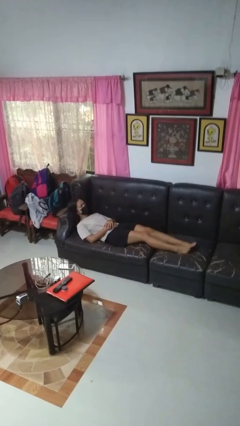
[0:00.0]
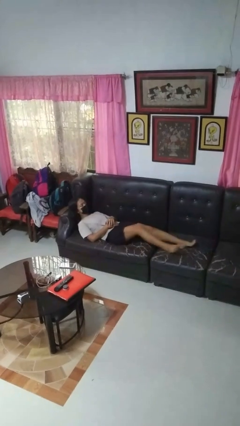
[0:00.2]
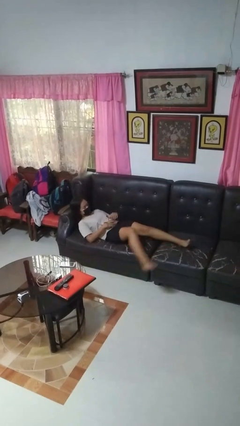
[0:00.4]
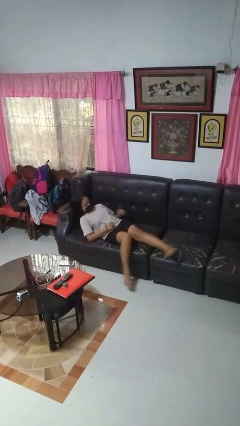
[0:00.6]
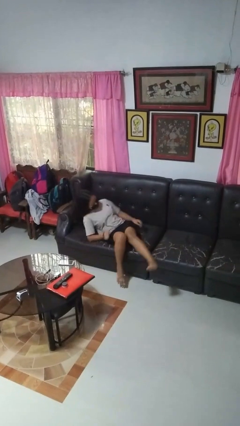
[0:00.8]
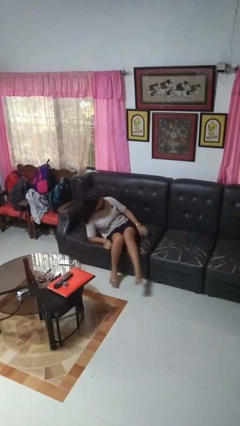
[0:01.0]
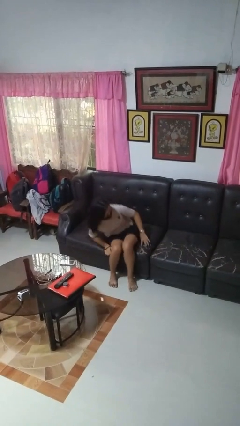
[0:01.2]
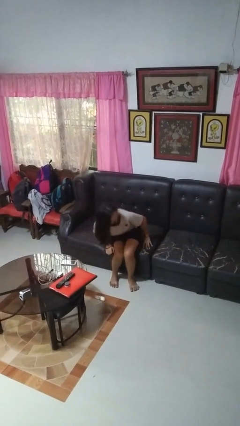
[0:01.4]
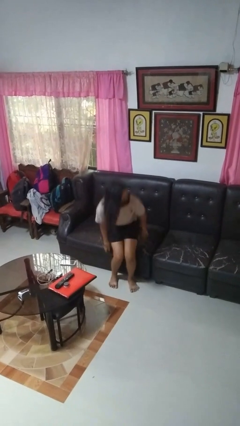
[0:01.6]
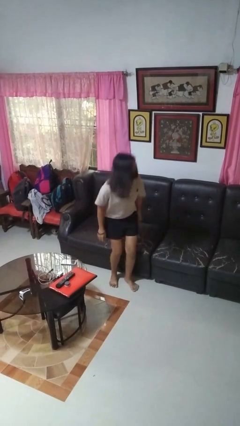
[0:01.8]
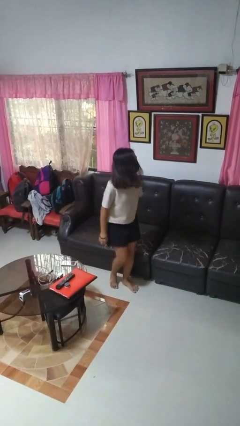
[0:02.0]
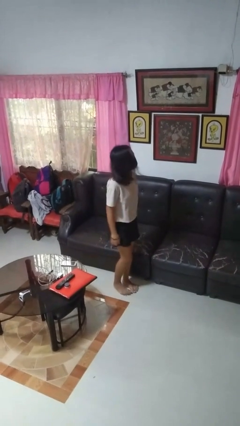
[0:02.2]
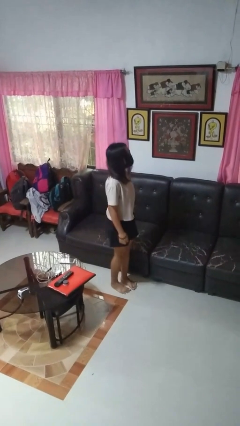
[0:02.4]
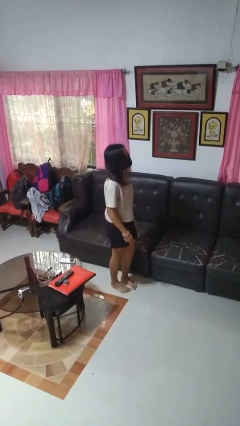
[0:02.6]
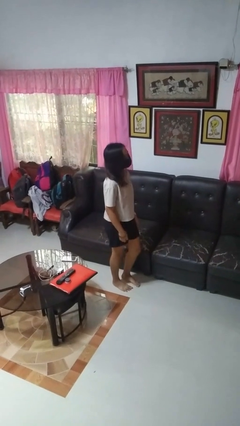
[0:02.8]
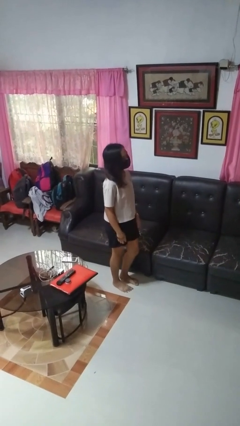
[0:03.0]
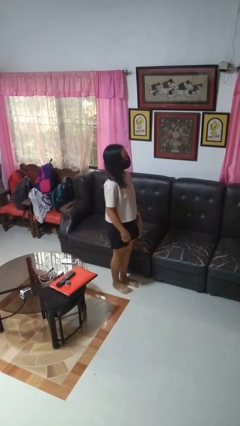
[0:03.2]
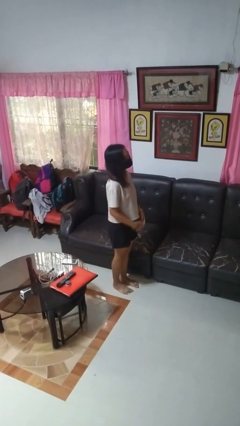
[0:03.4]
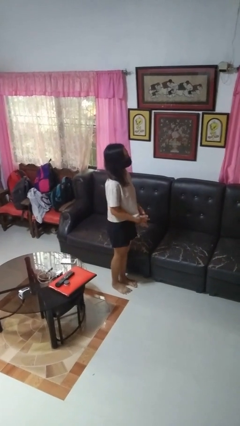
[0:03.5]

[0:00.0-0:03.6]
person stands up

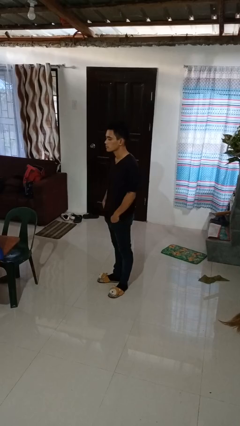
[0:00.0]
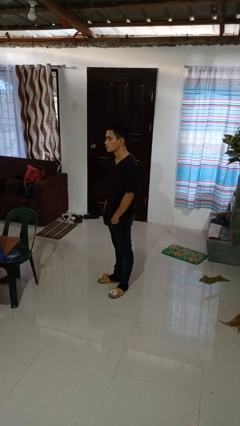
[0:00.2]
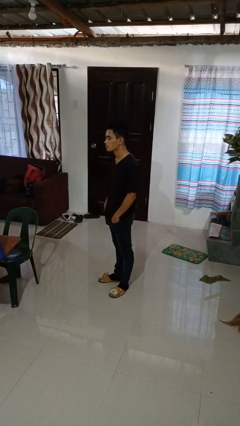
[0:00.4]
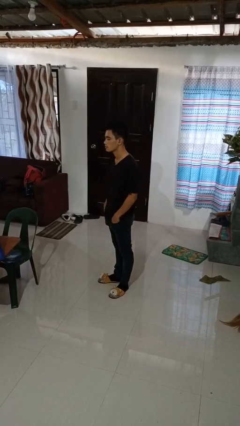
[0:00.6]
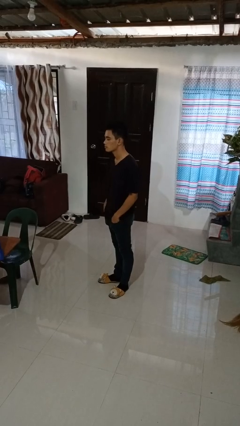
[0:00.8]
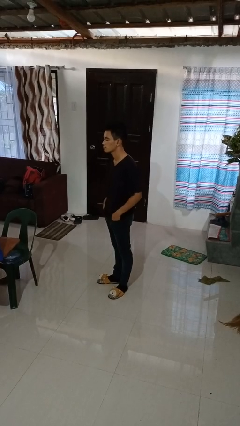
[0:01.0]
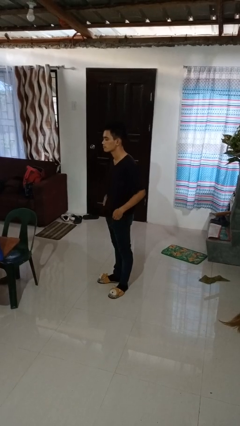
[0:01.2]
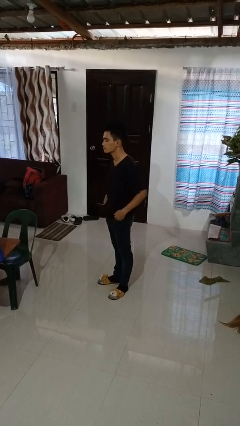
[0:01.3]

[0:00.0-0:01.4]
person puts hands in back pockets

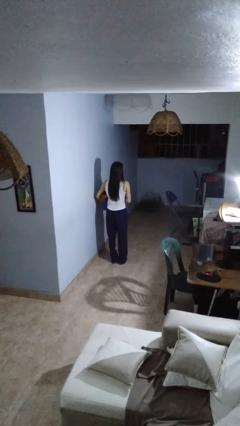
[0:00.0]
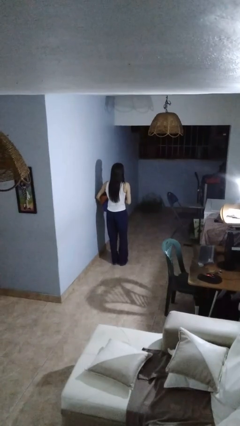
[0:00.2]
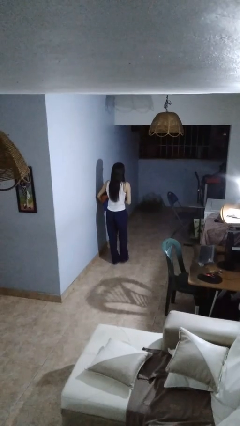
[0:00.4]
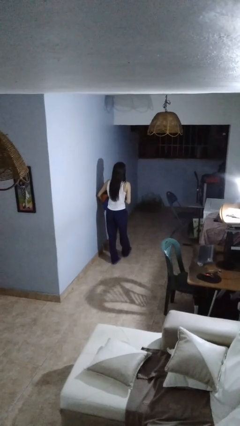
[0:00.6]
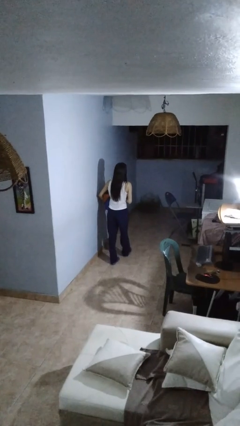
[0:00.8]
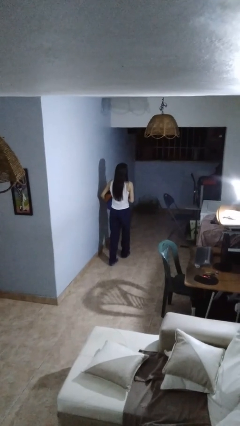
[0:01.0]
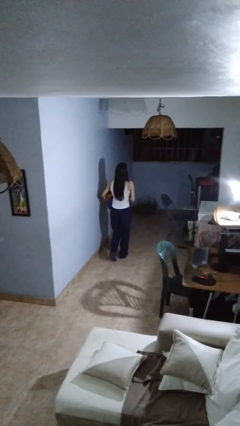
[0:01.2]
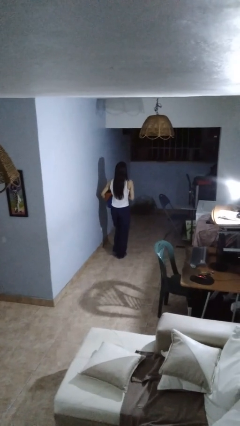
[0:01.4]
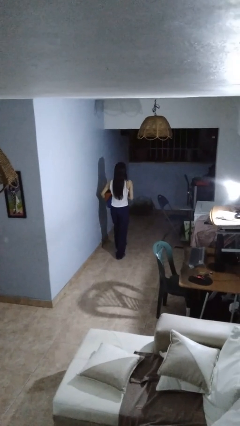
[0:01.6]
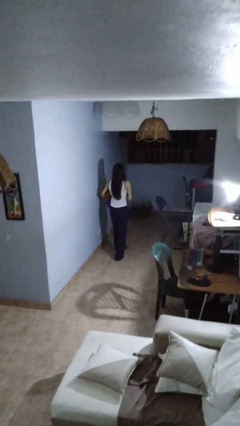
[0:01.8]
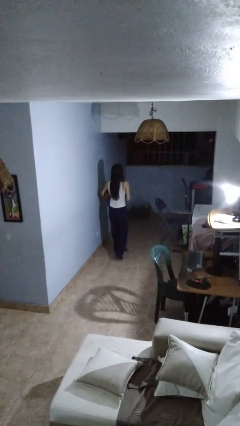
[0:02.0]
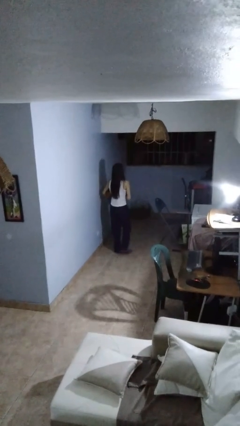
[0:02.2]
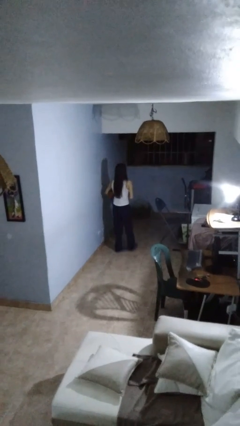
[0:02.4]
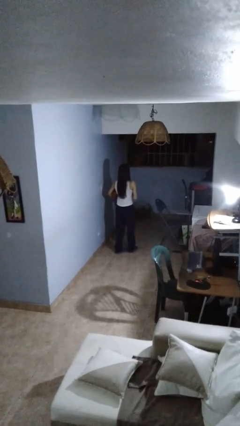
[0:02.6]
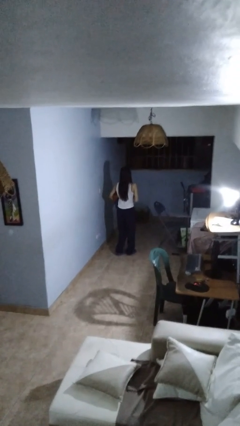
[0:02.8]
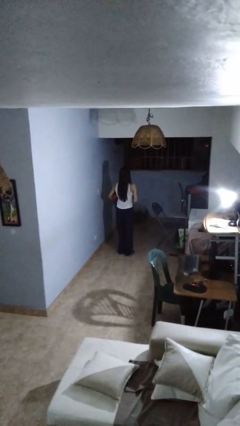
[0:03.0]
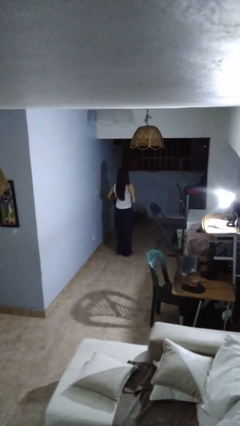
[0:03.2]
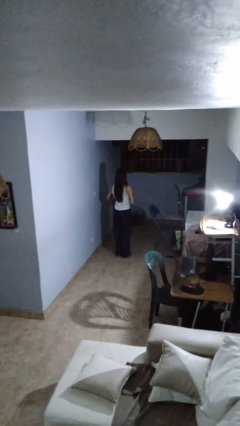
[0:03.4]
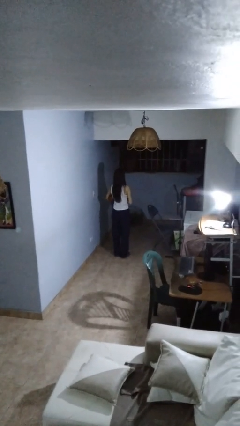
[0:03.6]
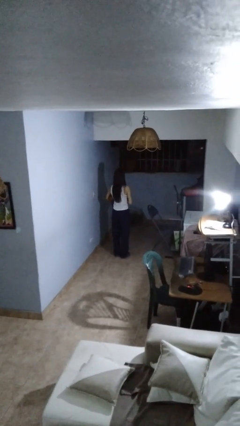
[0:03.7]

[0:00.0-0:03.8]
person carries laundry basket

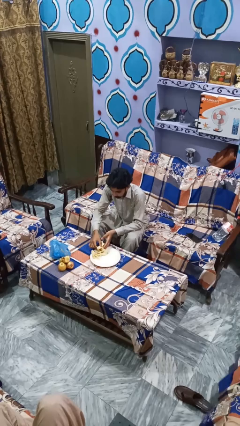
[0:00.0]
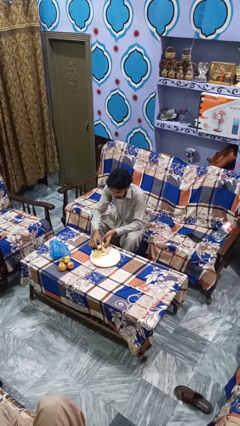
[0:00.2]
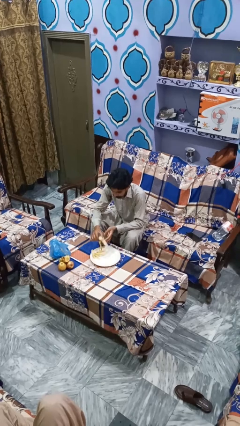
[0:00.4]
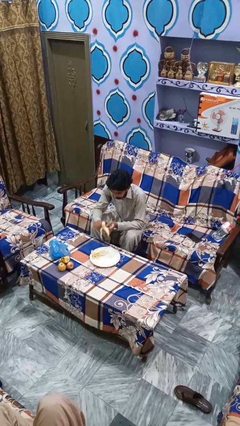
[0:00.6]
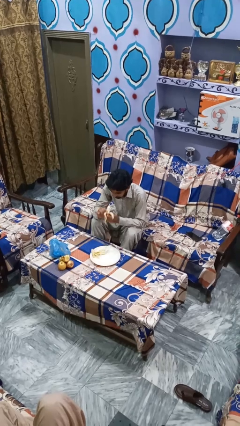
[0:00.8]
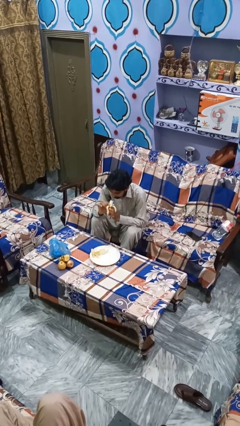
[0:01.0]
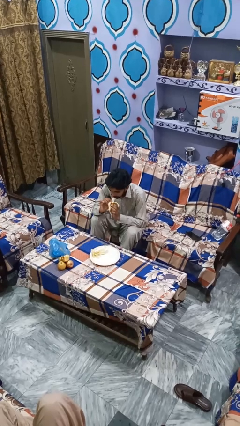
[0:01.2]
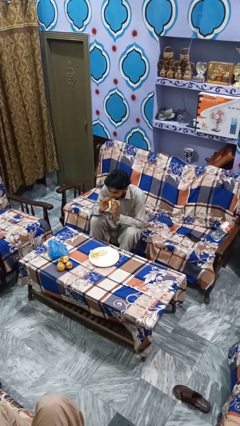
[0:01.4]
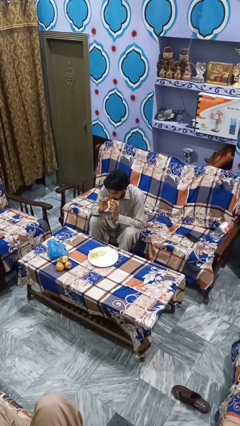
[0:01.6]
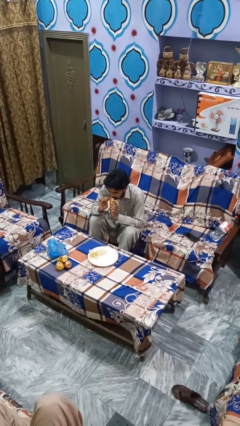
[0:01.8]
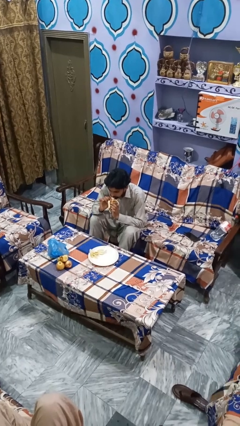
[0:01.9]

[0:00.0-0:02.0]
person eats banana

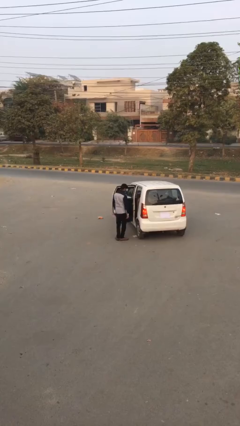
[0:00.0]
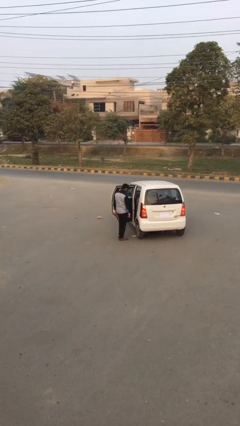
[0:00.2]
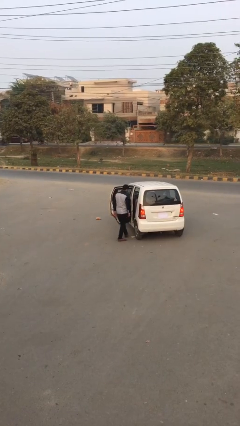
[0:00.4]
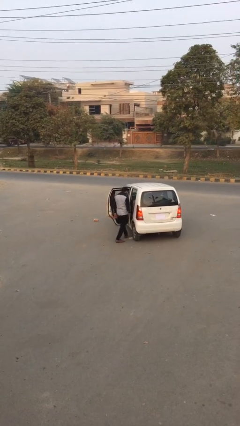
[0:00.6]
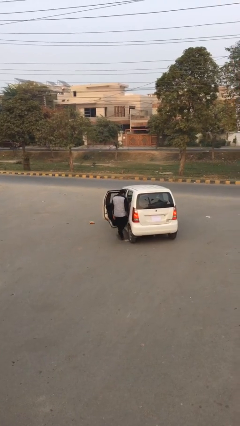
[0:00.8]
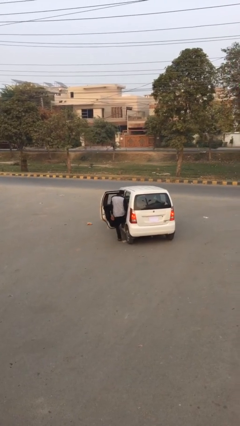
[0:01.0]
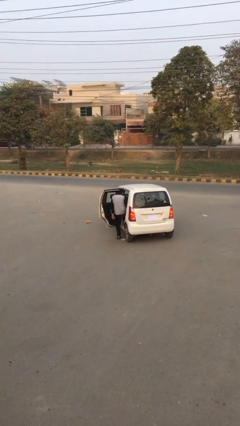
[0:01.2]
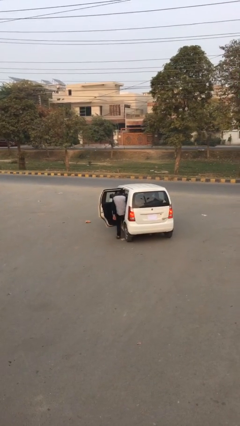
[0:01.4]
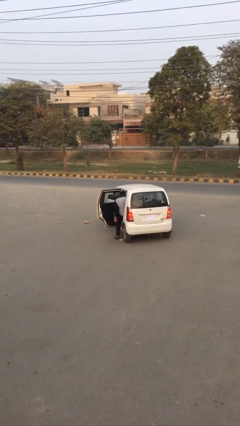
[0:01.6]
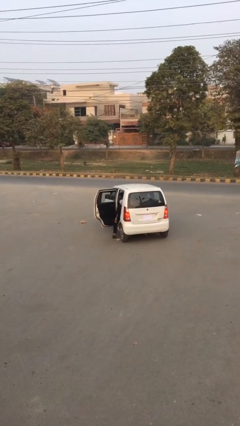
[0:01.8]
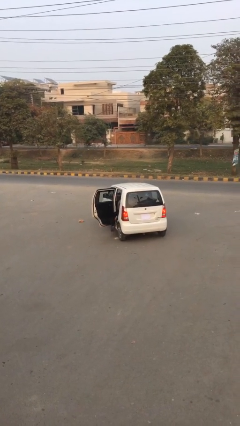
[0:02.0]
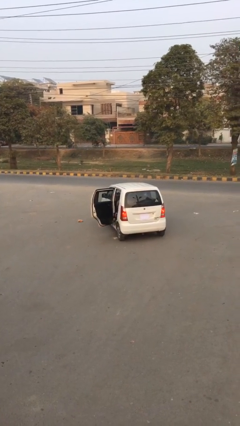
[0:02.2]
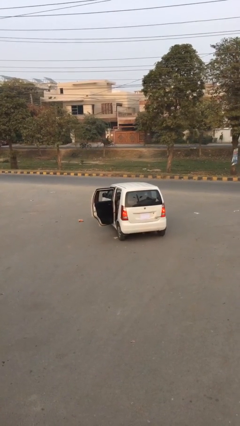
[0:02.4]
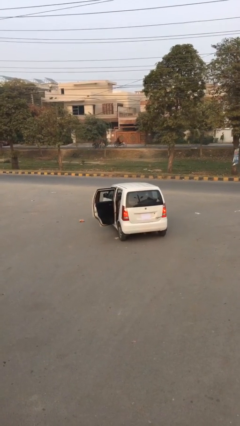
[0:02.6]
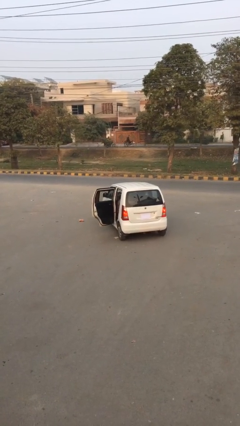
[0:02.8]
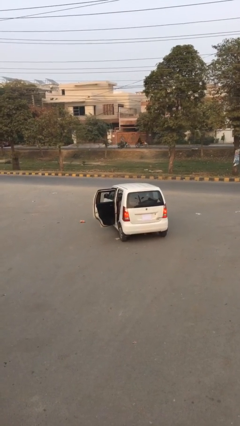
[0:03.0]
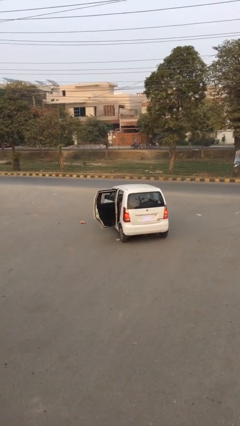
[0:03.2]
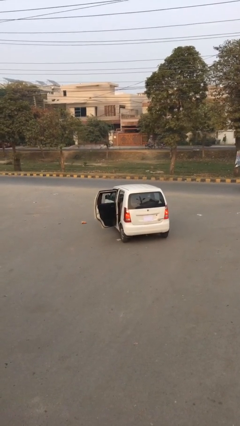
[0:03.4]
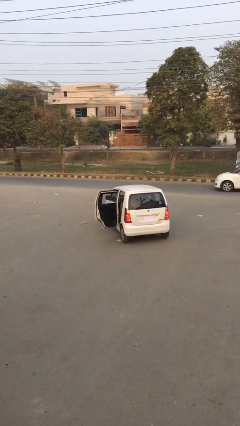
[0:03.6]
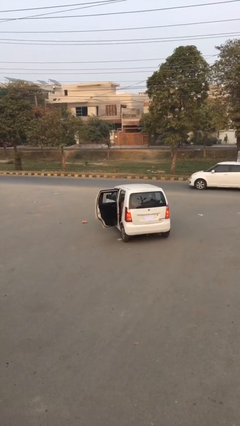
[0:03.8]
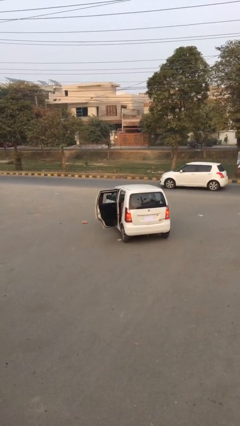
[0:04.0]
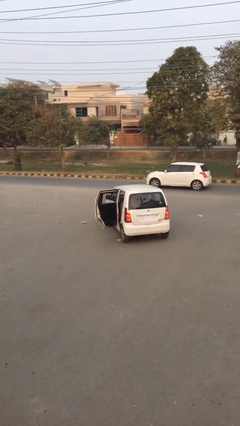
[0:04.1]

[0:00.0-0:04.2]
person enters car

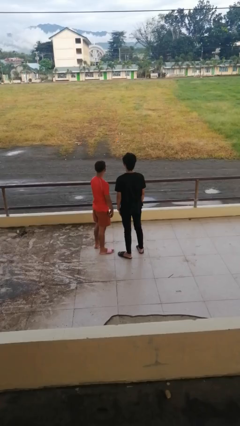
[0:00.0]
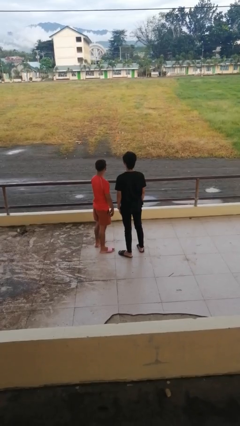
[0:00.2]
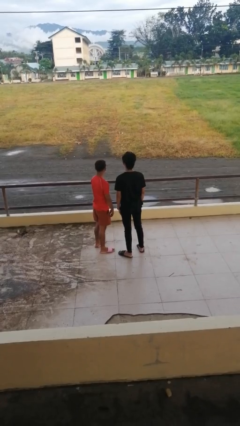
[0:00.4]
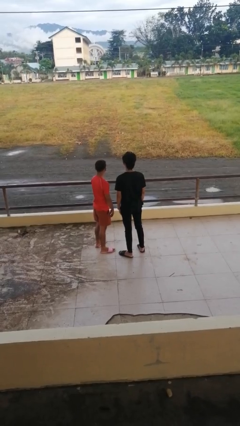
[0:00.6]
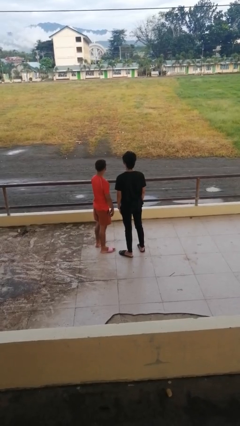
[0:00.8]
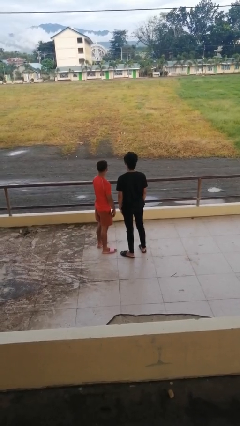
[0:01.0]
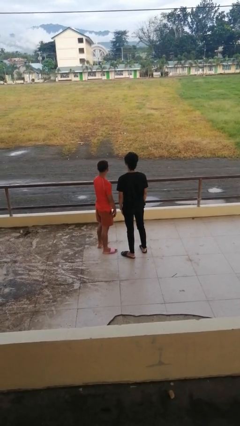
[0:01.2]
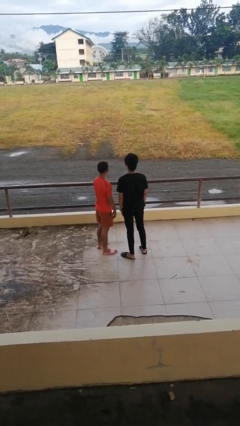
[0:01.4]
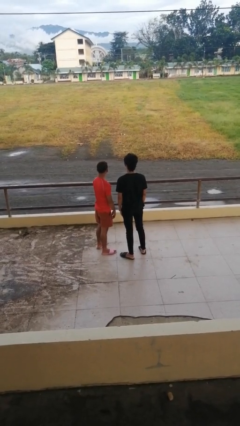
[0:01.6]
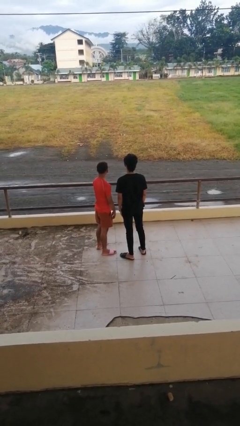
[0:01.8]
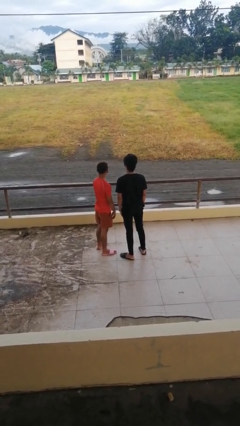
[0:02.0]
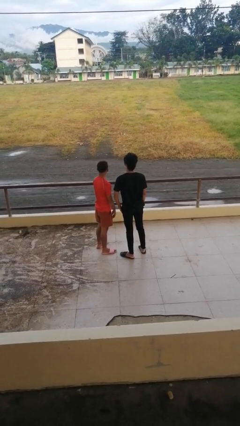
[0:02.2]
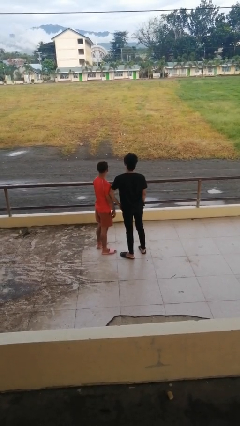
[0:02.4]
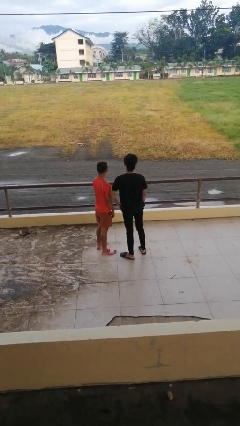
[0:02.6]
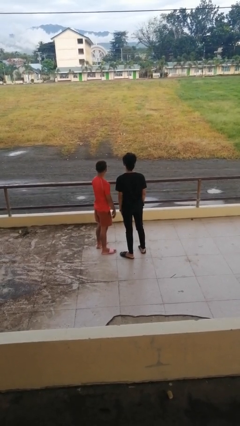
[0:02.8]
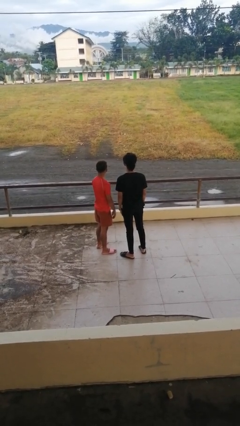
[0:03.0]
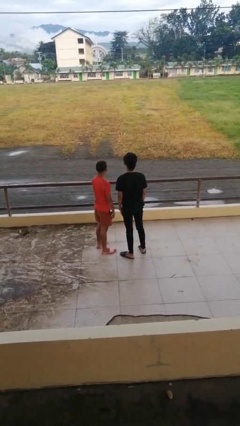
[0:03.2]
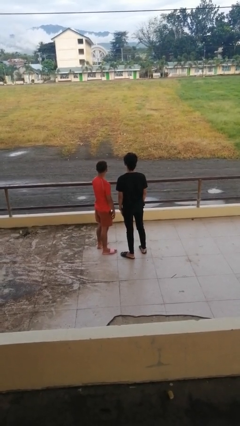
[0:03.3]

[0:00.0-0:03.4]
person nudges person with elbow
